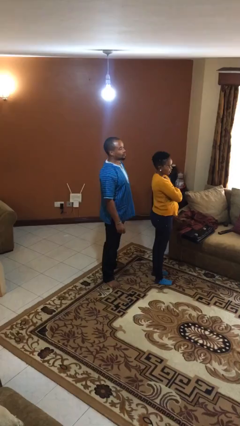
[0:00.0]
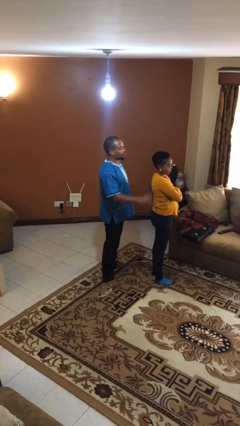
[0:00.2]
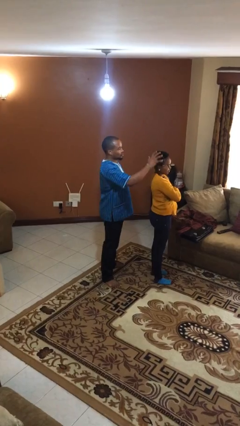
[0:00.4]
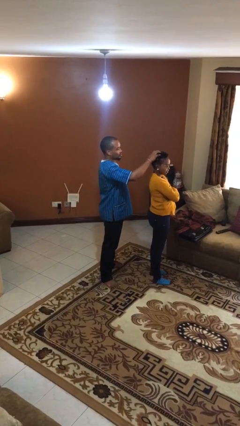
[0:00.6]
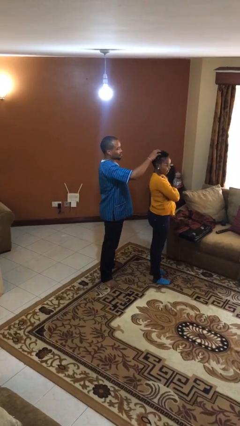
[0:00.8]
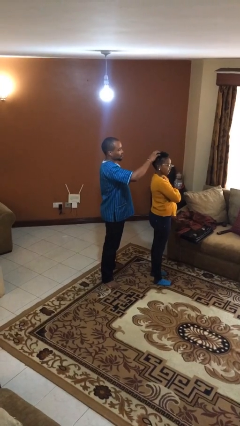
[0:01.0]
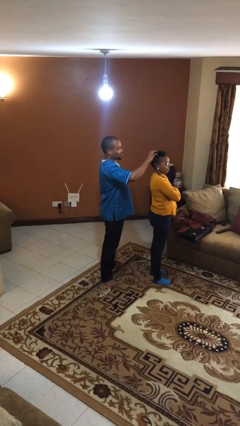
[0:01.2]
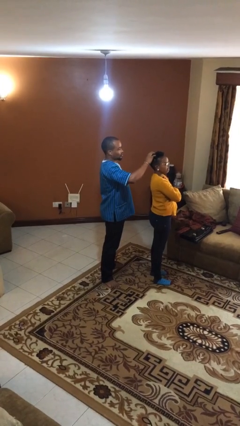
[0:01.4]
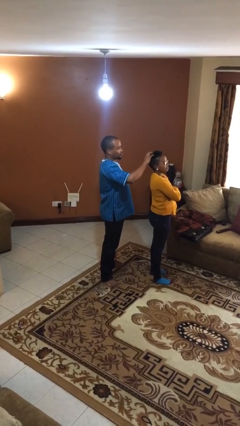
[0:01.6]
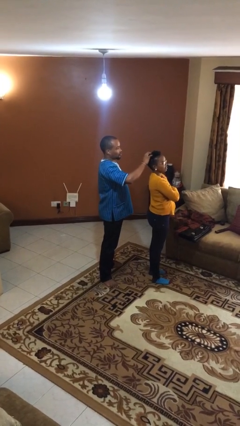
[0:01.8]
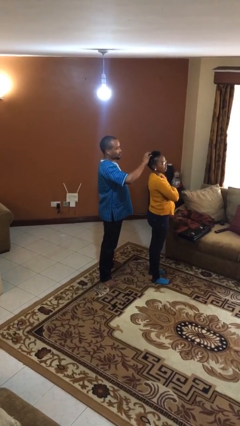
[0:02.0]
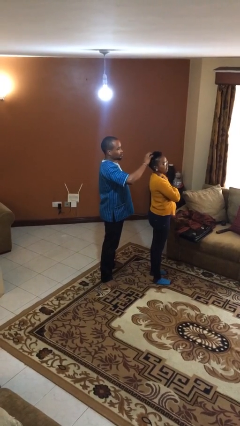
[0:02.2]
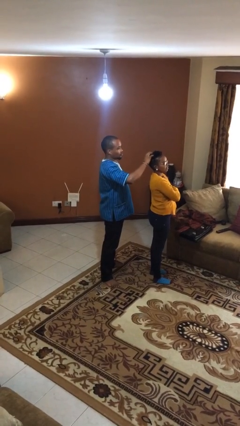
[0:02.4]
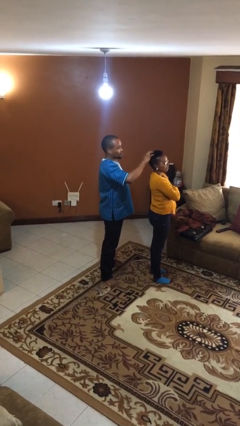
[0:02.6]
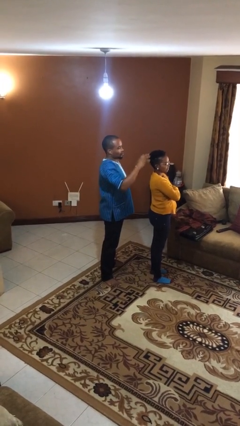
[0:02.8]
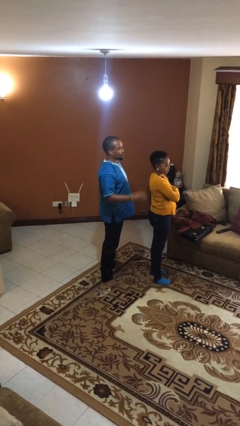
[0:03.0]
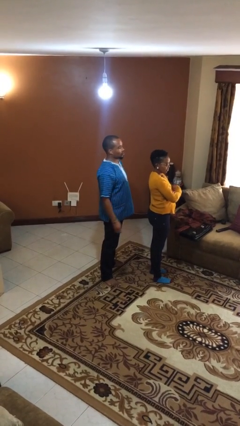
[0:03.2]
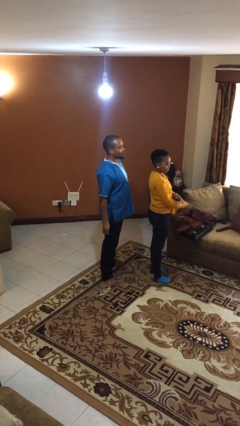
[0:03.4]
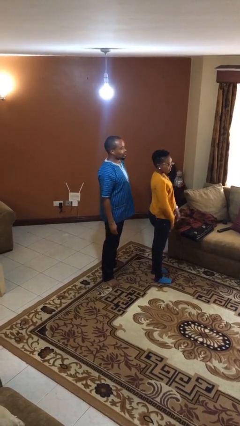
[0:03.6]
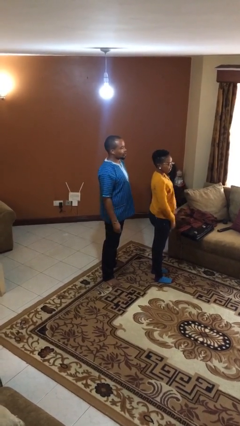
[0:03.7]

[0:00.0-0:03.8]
person grabs person by hair

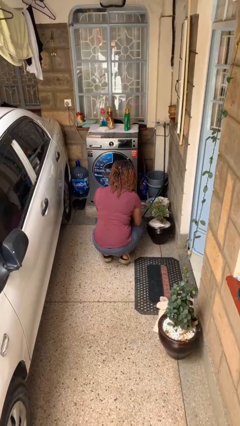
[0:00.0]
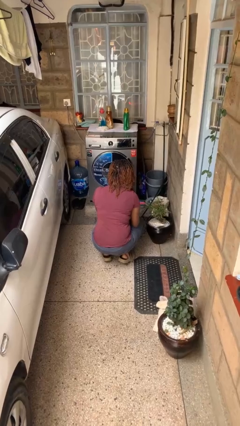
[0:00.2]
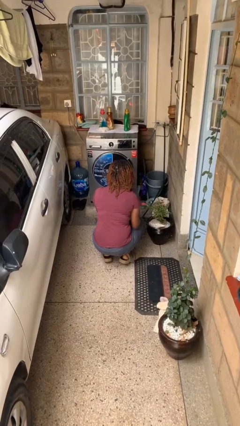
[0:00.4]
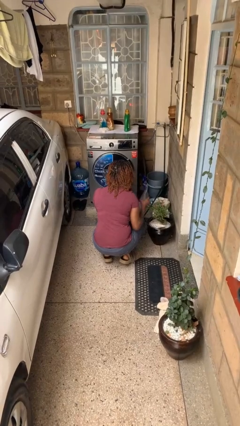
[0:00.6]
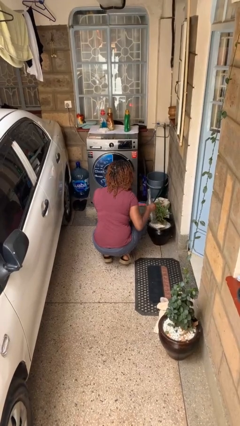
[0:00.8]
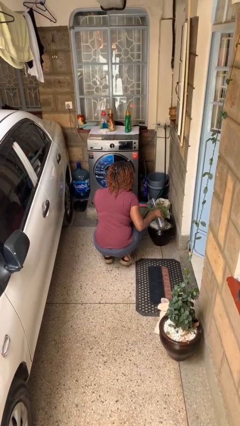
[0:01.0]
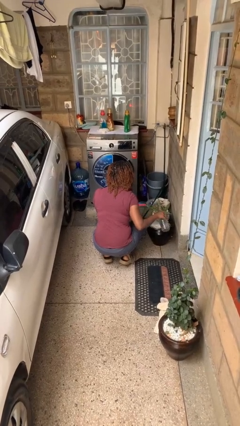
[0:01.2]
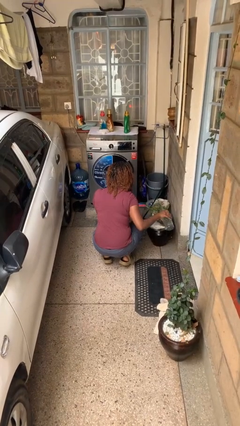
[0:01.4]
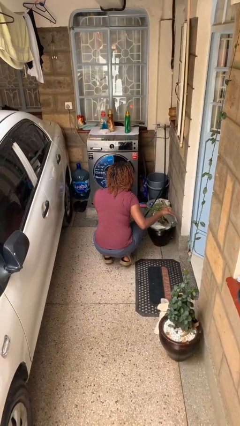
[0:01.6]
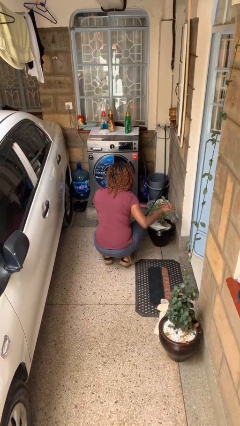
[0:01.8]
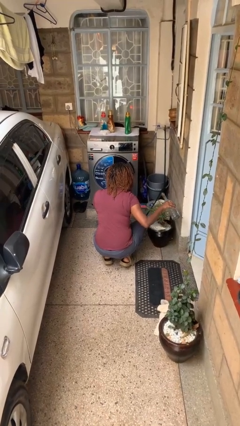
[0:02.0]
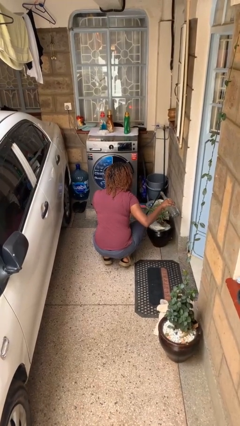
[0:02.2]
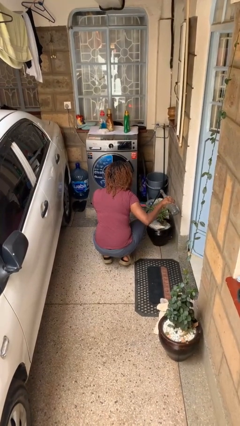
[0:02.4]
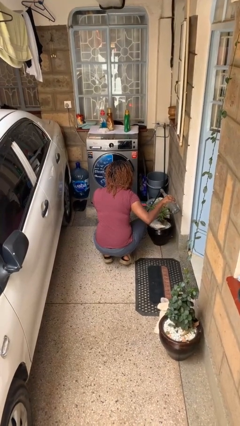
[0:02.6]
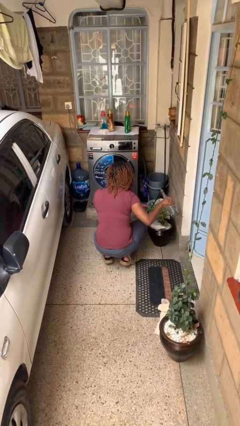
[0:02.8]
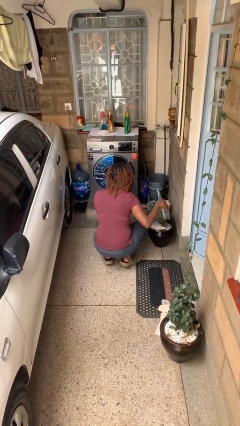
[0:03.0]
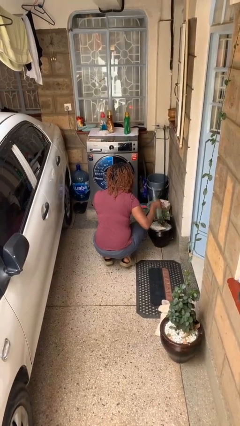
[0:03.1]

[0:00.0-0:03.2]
person waters houseplant

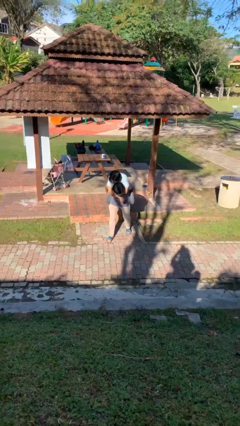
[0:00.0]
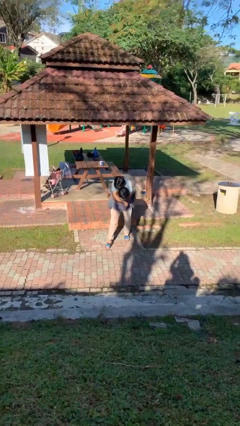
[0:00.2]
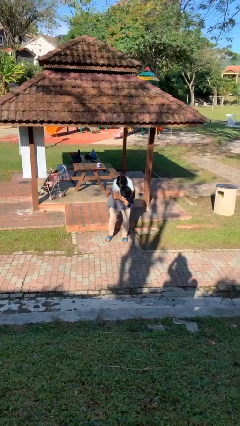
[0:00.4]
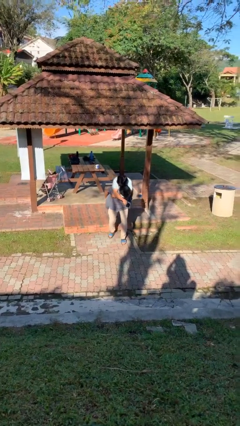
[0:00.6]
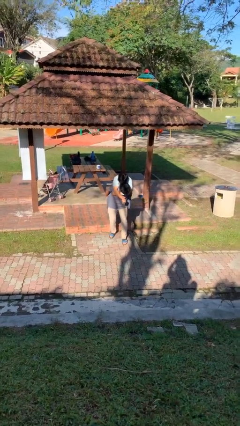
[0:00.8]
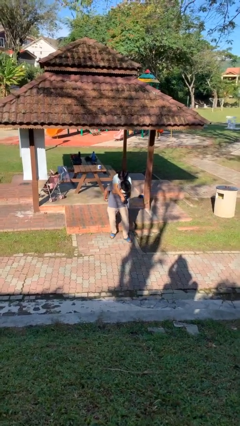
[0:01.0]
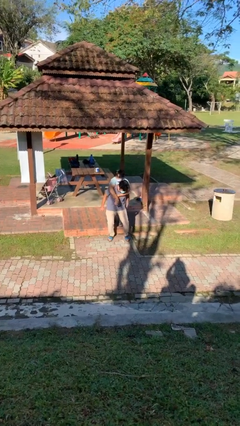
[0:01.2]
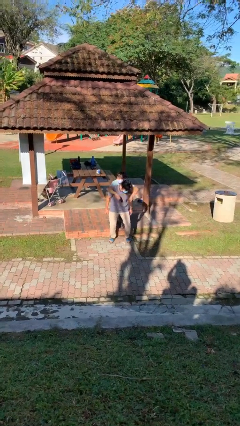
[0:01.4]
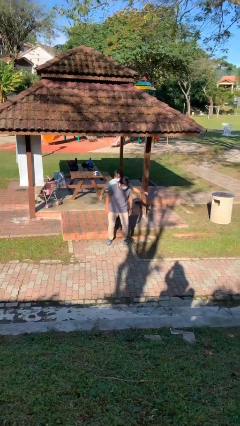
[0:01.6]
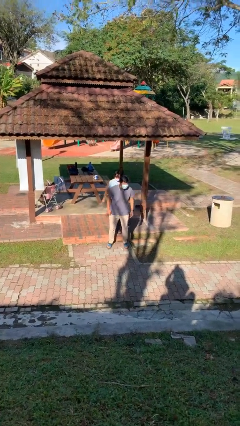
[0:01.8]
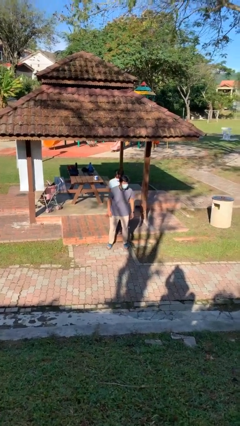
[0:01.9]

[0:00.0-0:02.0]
person puts down person

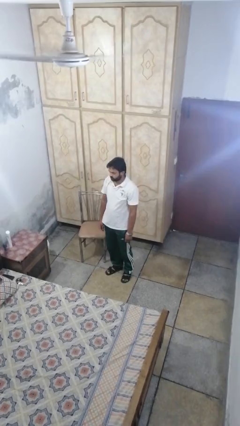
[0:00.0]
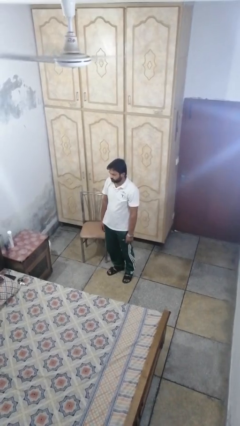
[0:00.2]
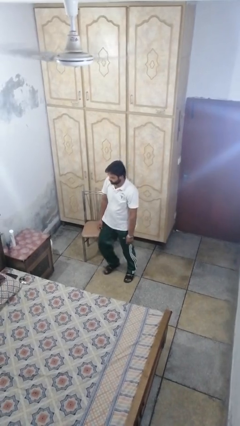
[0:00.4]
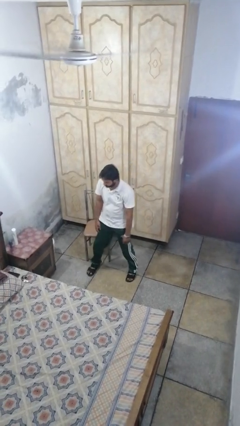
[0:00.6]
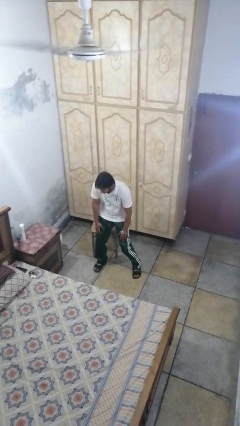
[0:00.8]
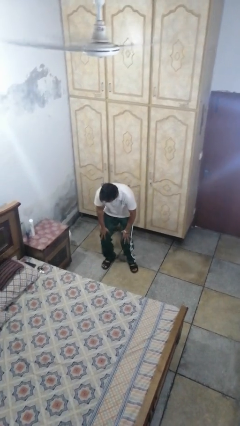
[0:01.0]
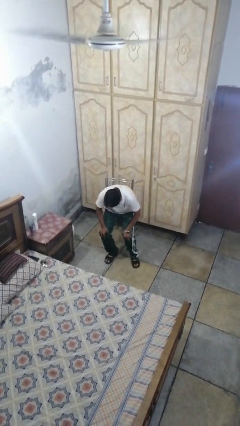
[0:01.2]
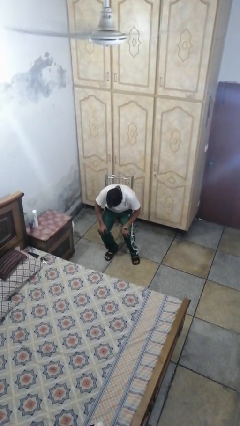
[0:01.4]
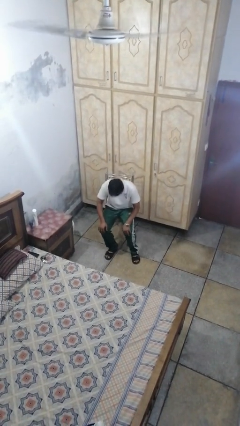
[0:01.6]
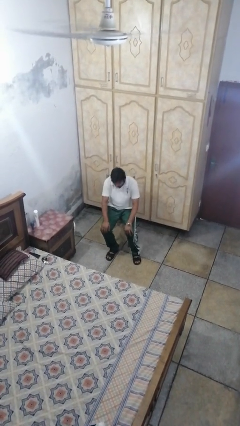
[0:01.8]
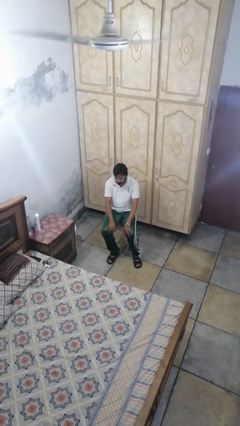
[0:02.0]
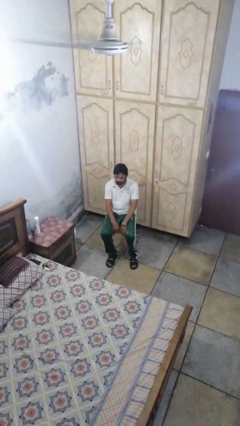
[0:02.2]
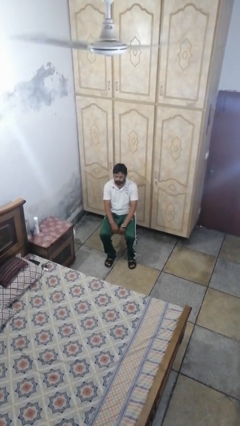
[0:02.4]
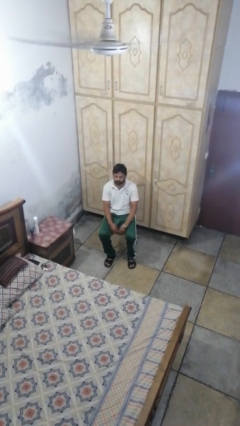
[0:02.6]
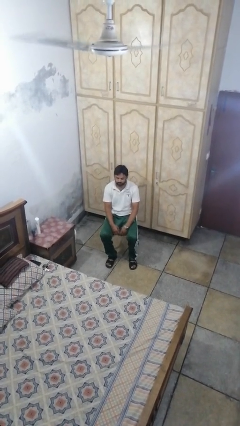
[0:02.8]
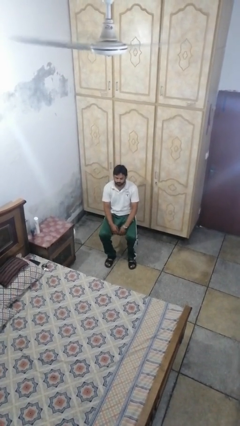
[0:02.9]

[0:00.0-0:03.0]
person sits down

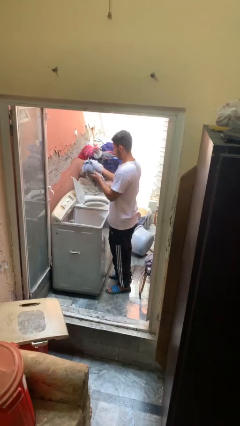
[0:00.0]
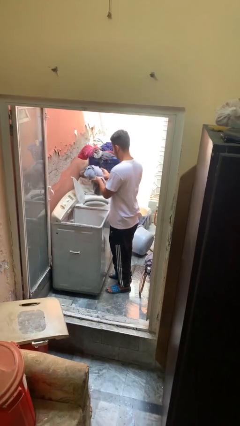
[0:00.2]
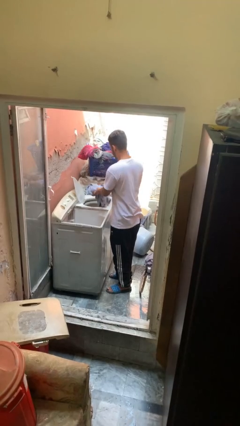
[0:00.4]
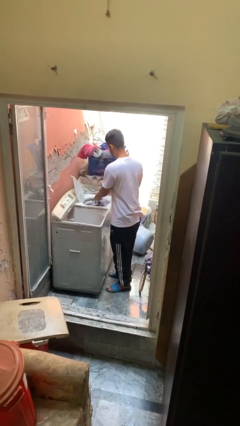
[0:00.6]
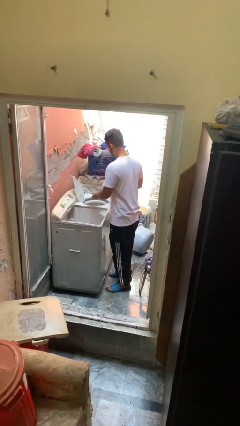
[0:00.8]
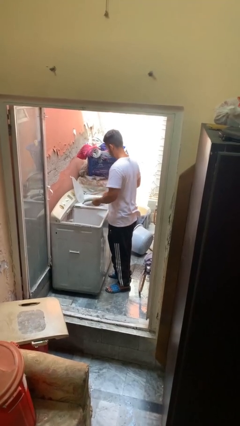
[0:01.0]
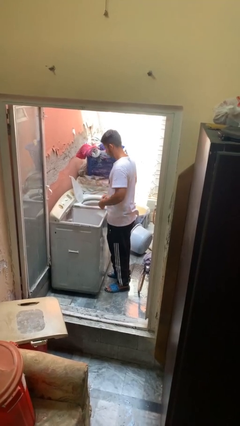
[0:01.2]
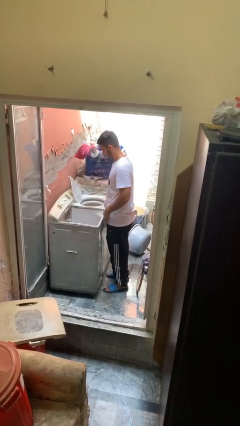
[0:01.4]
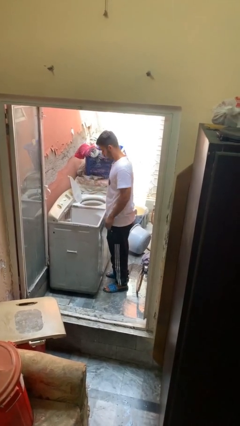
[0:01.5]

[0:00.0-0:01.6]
person loads dryer

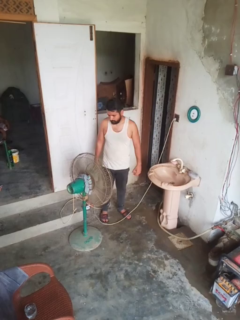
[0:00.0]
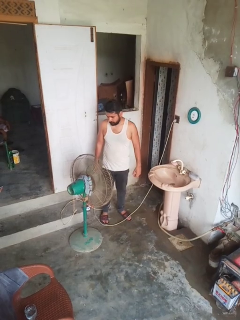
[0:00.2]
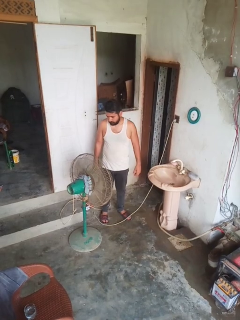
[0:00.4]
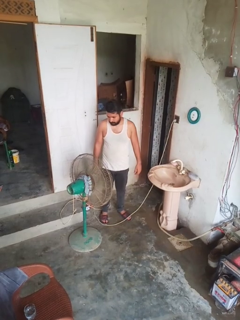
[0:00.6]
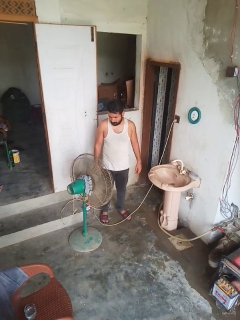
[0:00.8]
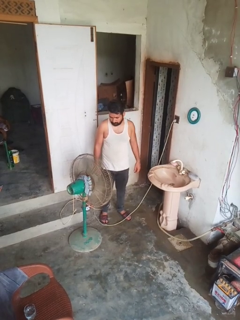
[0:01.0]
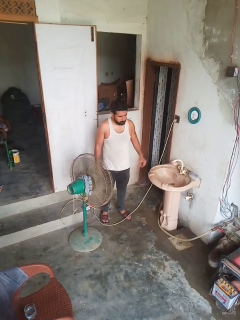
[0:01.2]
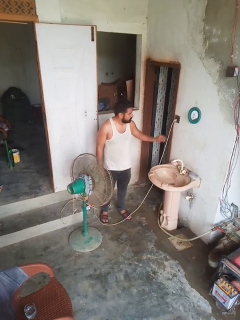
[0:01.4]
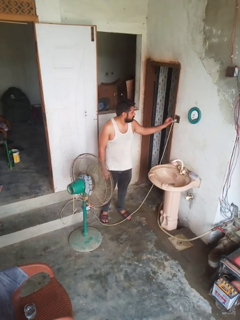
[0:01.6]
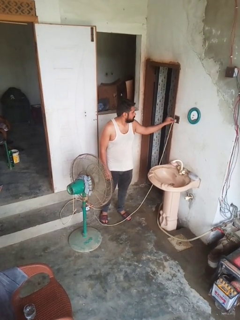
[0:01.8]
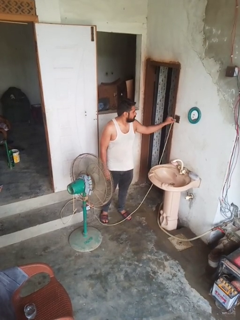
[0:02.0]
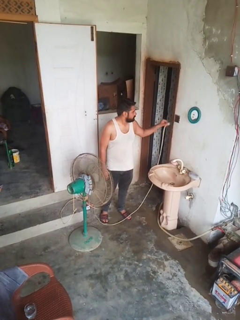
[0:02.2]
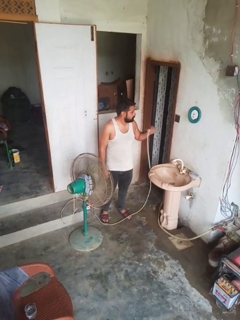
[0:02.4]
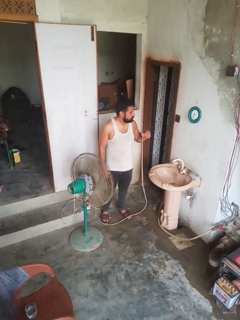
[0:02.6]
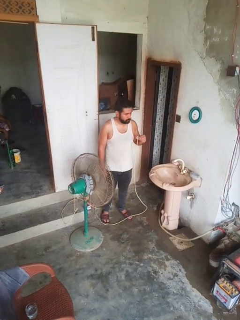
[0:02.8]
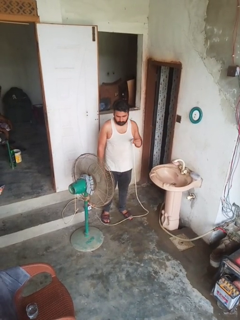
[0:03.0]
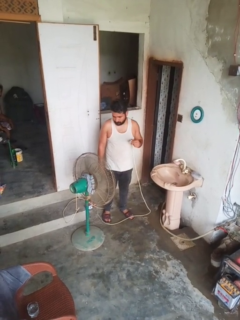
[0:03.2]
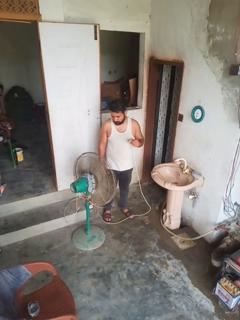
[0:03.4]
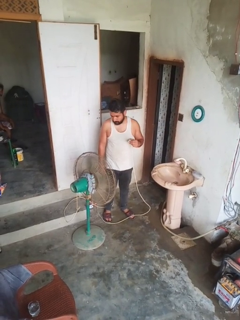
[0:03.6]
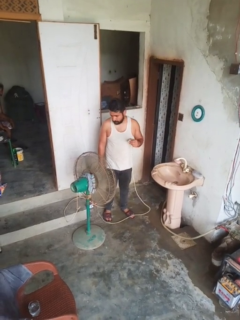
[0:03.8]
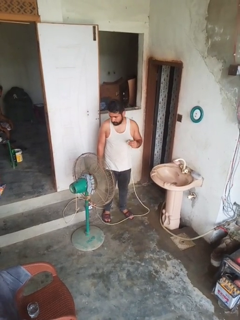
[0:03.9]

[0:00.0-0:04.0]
person turns off fan

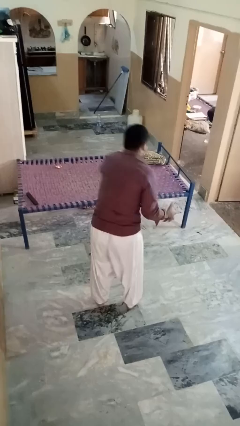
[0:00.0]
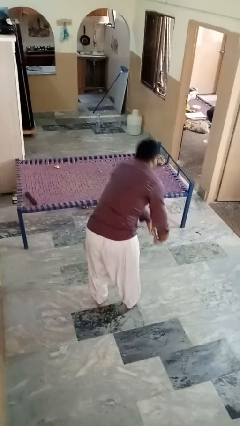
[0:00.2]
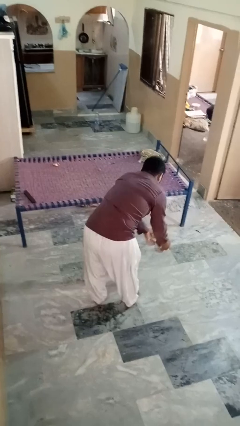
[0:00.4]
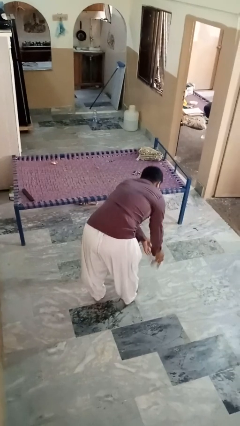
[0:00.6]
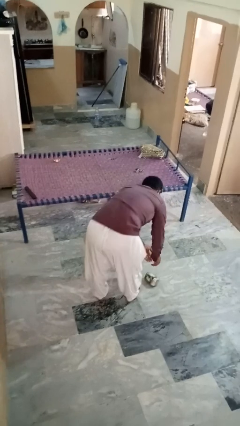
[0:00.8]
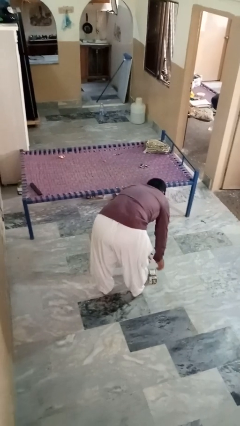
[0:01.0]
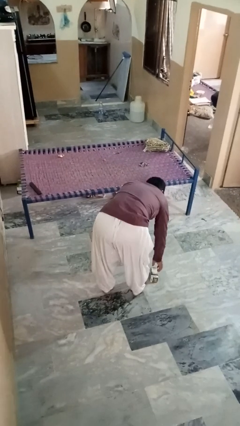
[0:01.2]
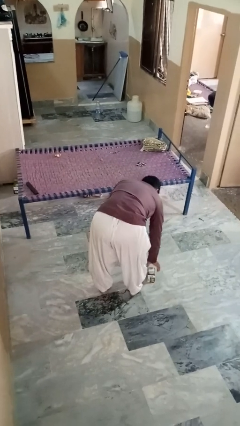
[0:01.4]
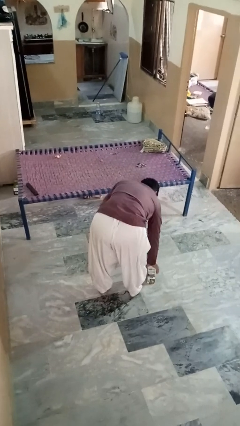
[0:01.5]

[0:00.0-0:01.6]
person catches dropped object
